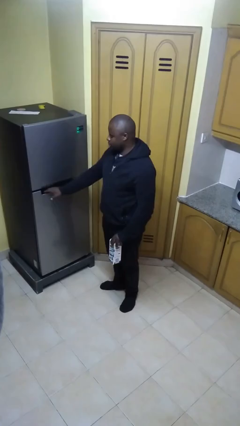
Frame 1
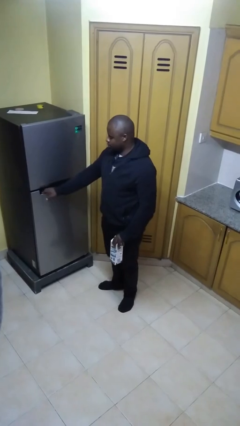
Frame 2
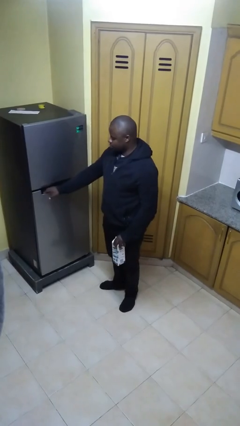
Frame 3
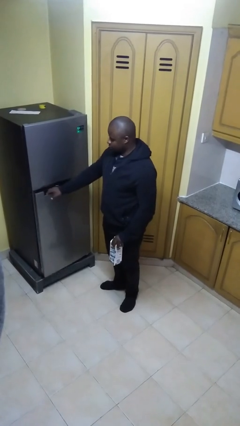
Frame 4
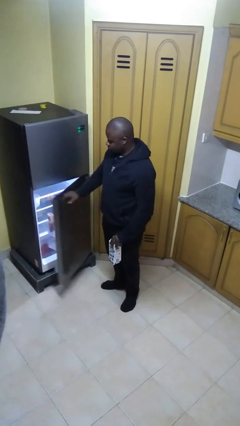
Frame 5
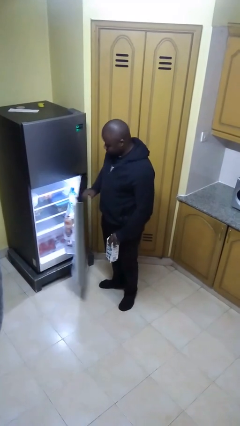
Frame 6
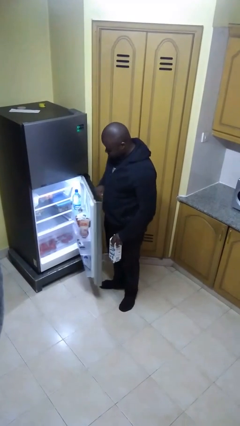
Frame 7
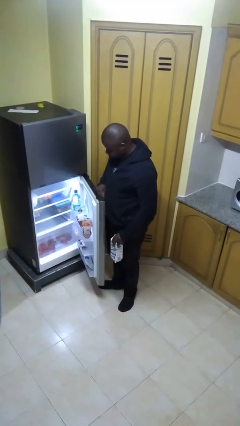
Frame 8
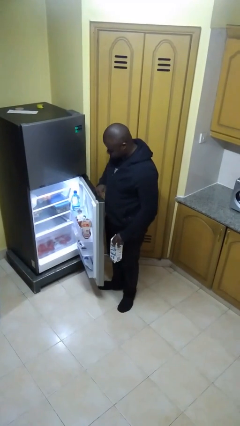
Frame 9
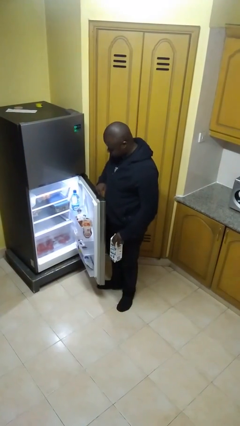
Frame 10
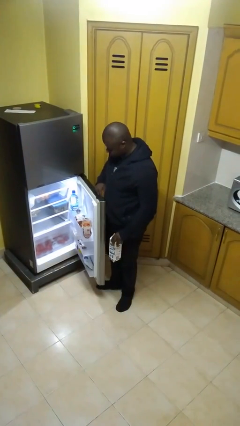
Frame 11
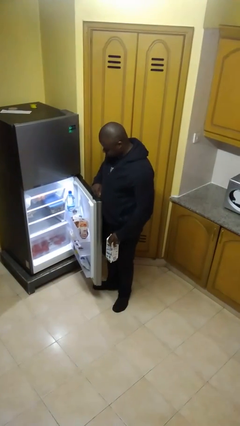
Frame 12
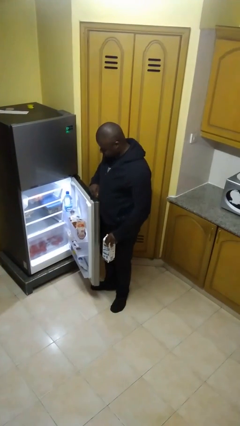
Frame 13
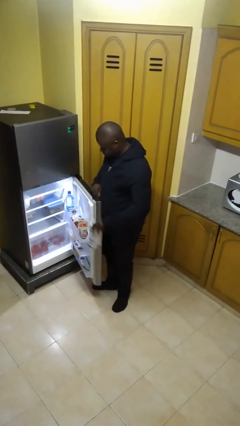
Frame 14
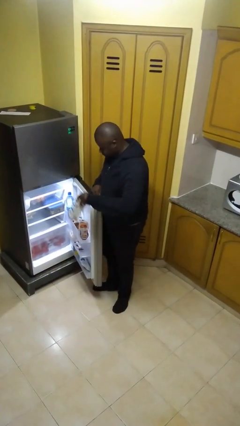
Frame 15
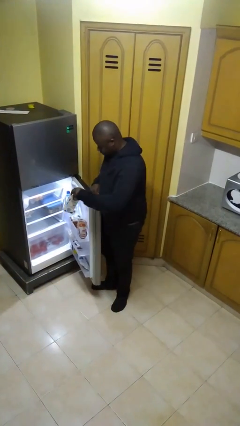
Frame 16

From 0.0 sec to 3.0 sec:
person opens refrigerator

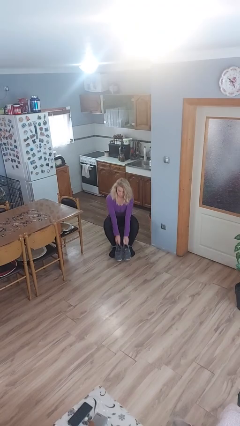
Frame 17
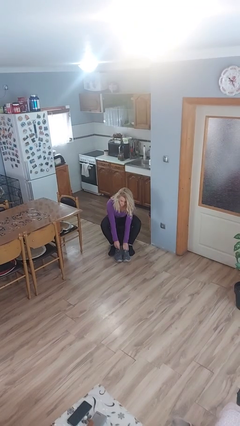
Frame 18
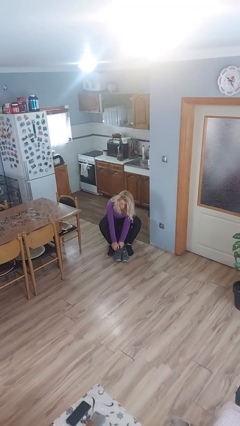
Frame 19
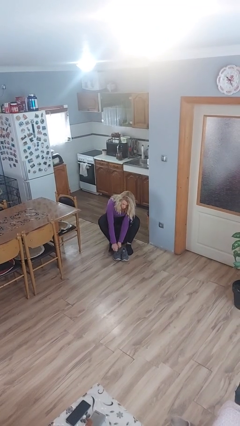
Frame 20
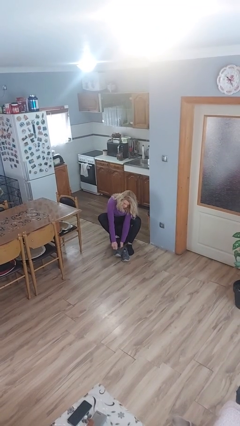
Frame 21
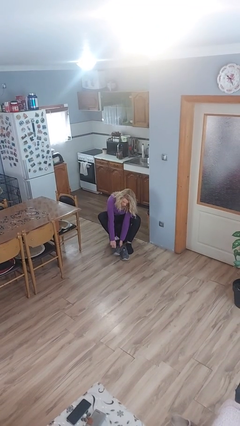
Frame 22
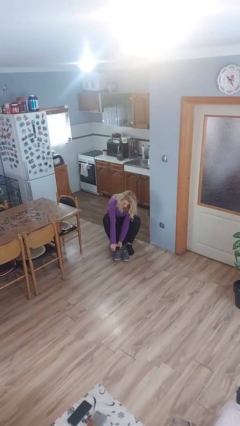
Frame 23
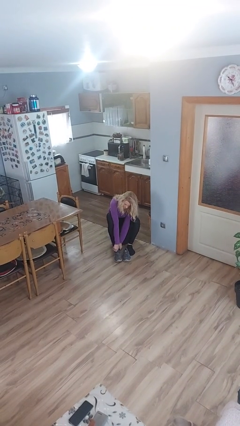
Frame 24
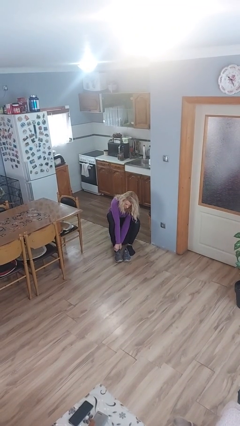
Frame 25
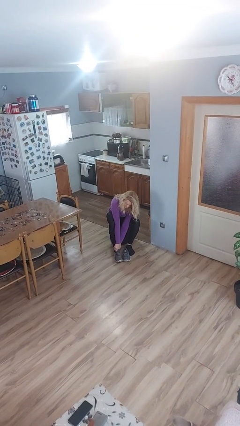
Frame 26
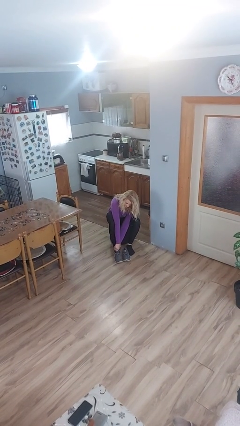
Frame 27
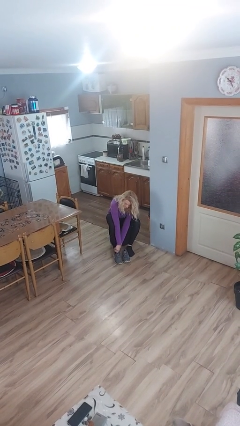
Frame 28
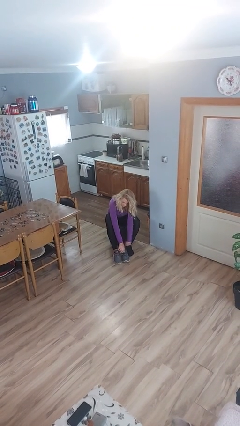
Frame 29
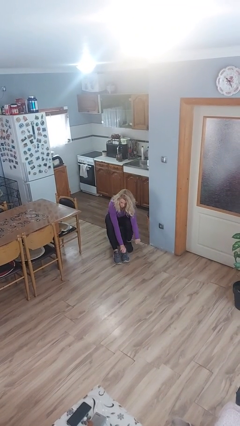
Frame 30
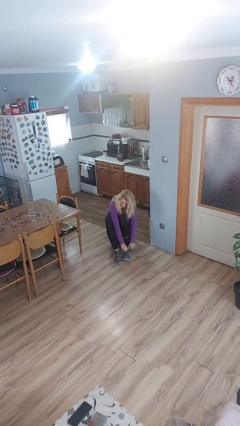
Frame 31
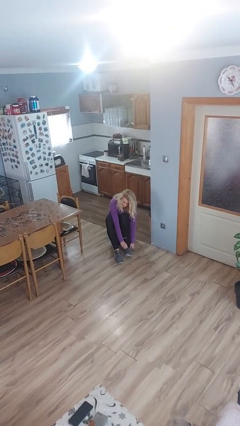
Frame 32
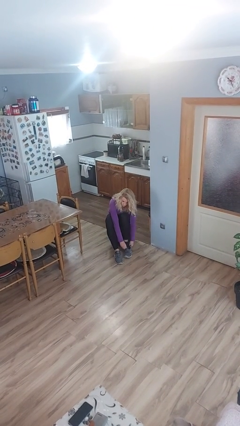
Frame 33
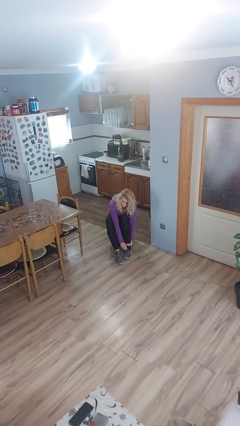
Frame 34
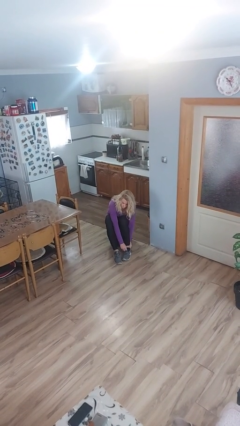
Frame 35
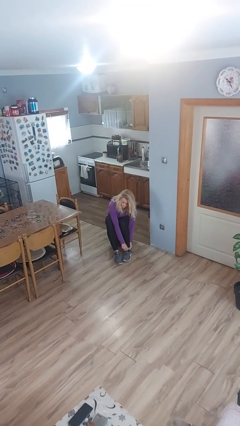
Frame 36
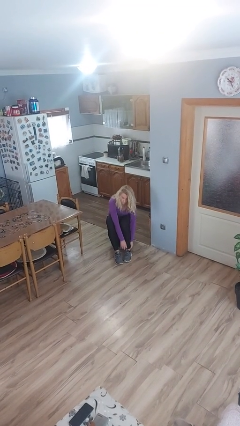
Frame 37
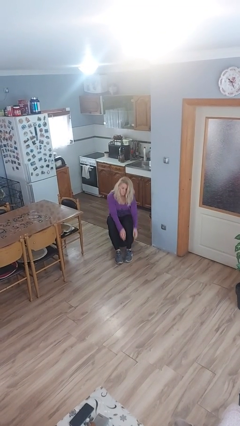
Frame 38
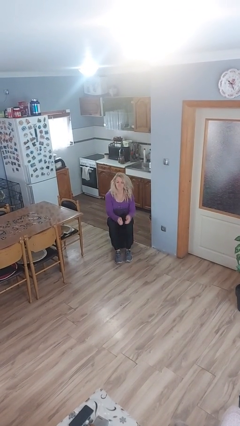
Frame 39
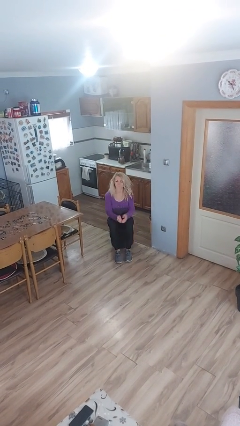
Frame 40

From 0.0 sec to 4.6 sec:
person puts on shoes

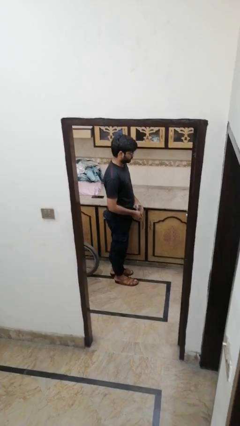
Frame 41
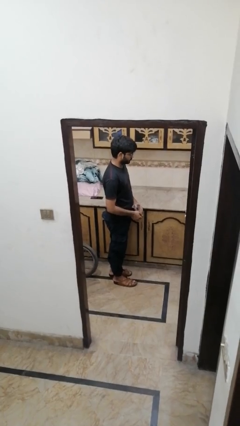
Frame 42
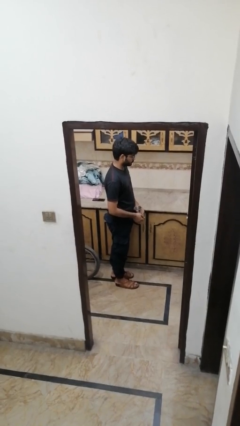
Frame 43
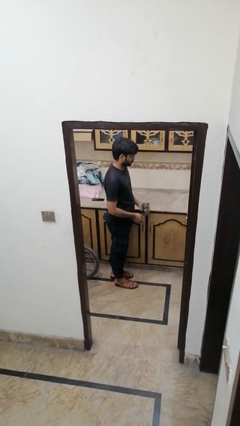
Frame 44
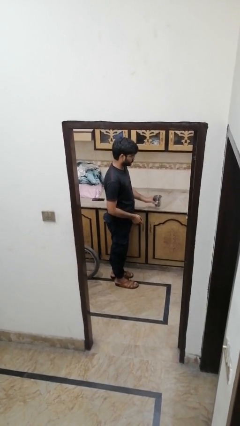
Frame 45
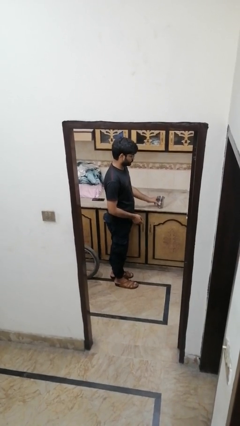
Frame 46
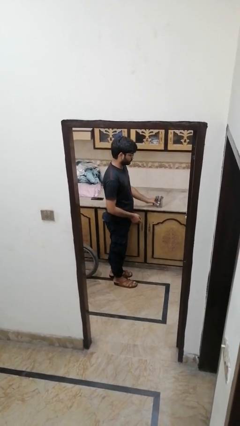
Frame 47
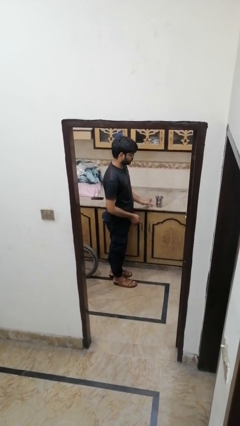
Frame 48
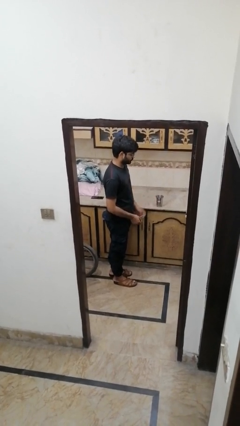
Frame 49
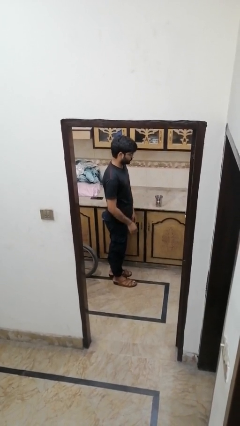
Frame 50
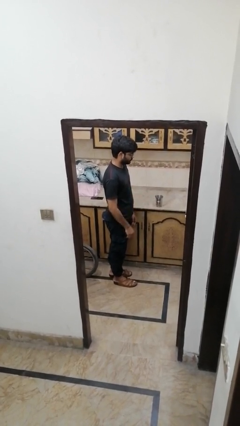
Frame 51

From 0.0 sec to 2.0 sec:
person puts down object on countertop

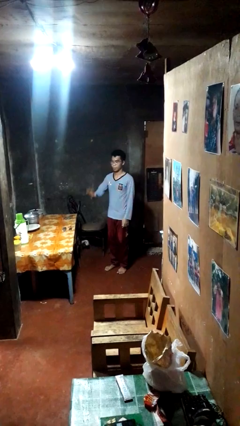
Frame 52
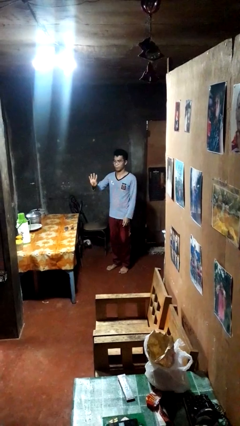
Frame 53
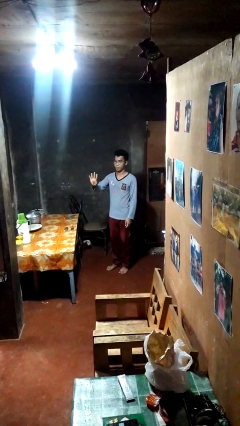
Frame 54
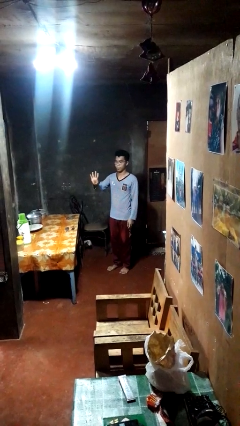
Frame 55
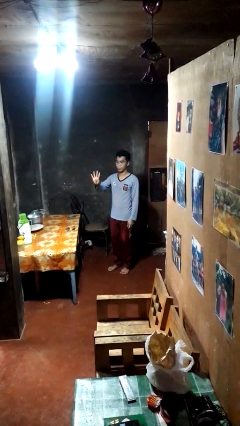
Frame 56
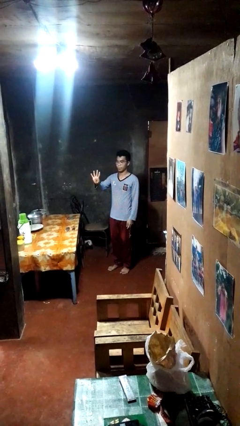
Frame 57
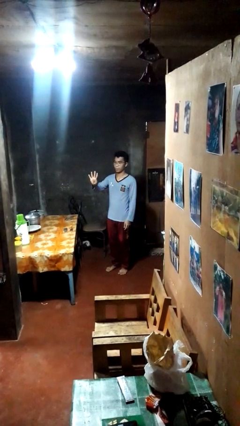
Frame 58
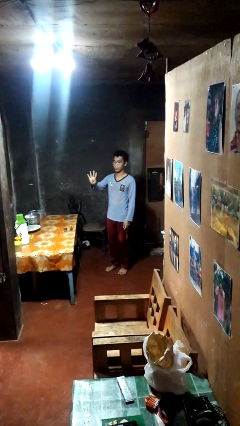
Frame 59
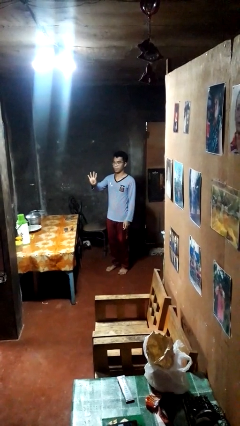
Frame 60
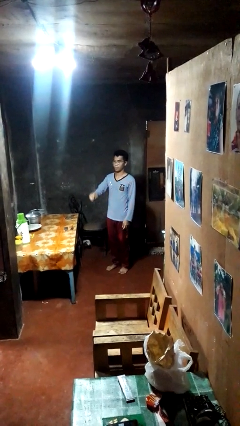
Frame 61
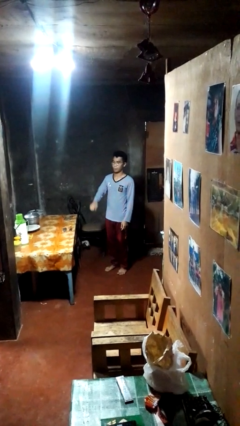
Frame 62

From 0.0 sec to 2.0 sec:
person gestures number four

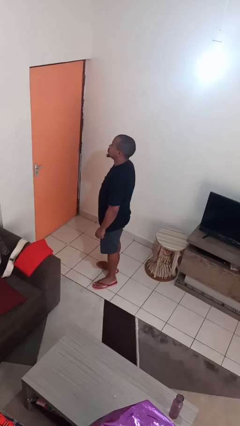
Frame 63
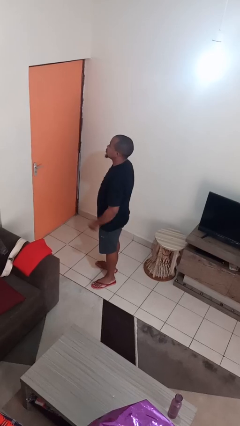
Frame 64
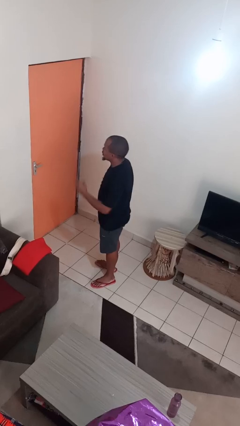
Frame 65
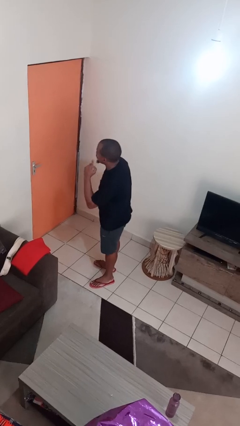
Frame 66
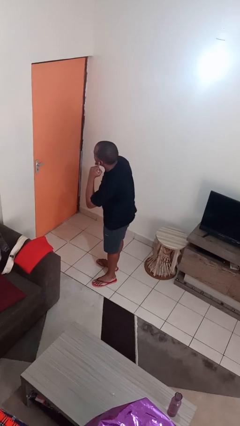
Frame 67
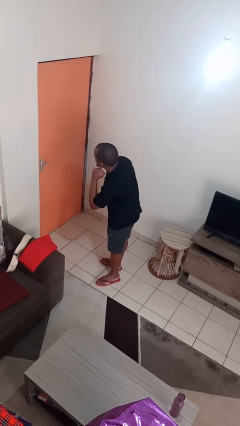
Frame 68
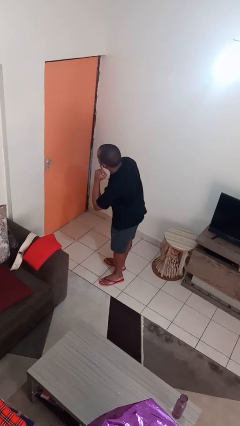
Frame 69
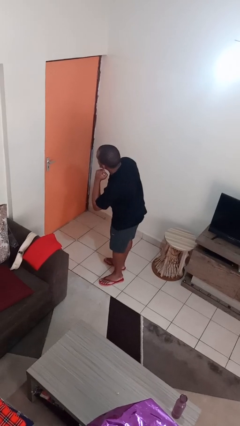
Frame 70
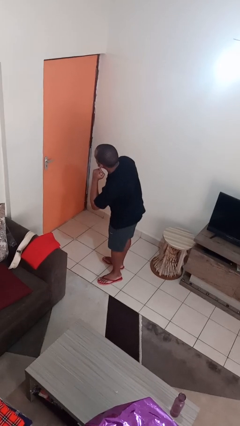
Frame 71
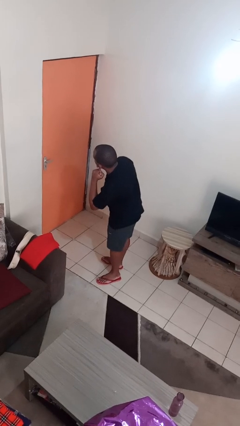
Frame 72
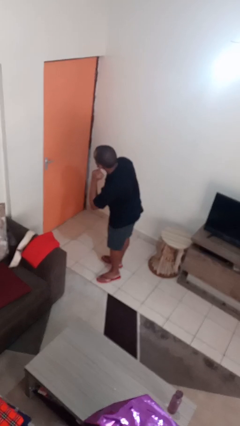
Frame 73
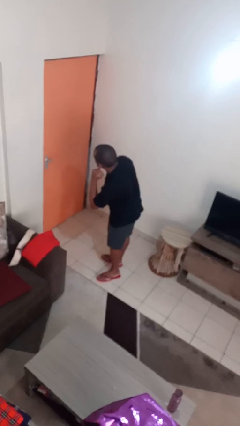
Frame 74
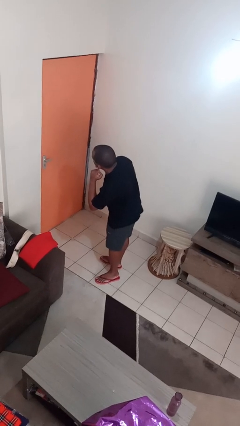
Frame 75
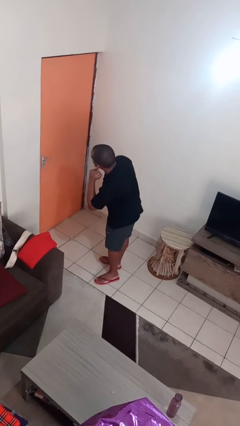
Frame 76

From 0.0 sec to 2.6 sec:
person gestures listen closely

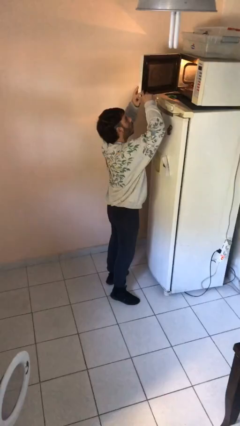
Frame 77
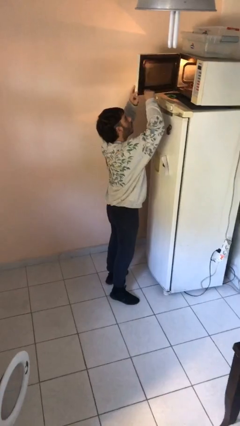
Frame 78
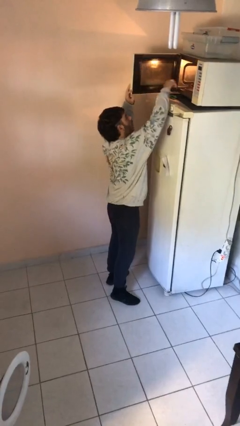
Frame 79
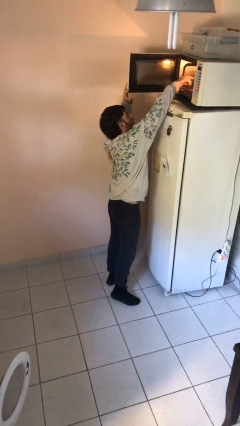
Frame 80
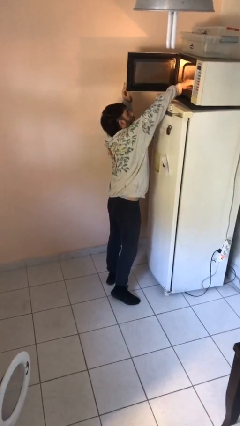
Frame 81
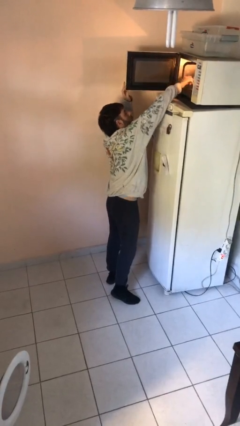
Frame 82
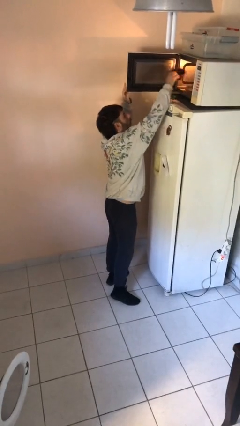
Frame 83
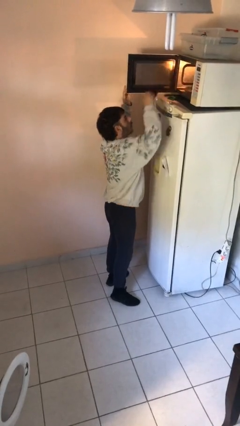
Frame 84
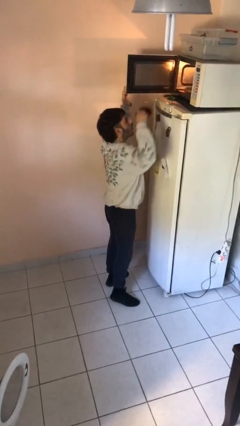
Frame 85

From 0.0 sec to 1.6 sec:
person takes object from microwave

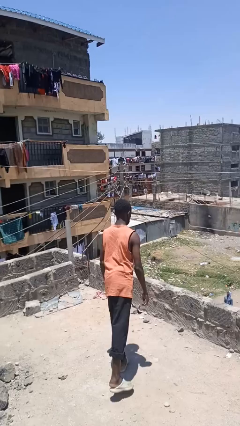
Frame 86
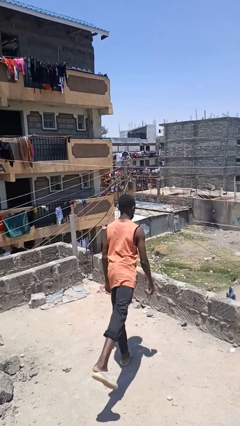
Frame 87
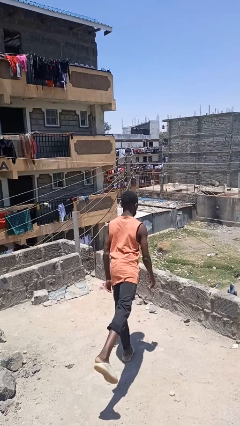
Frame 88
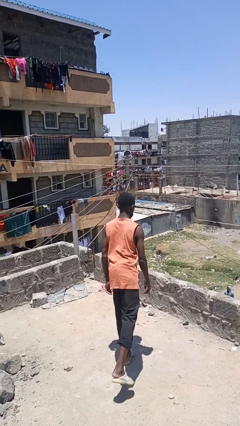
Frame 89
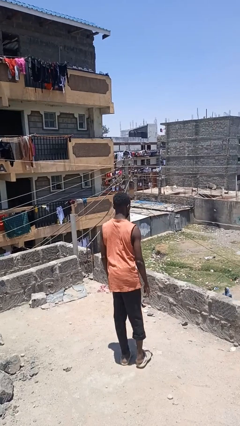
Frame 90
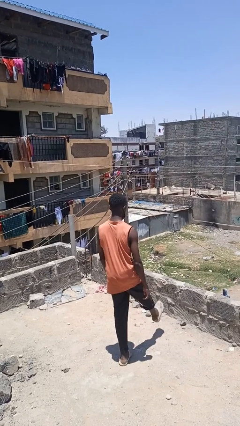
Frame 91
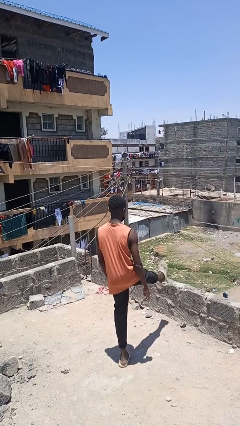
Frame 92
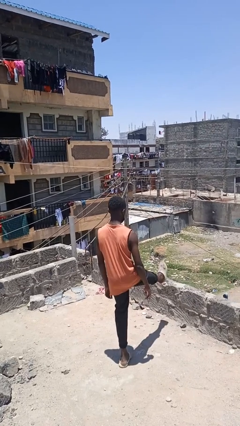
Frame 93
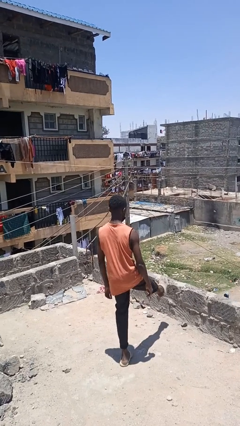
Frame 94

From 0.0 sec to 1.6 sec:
person wiggles hips
